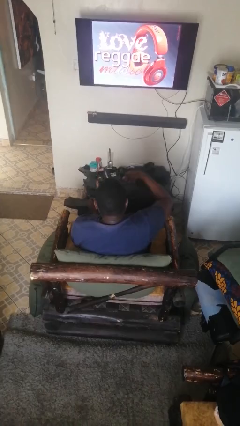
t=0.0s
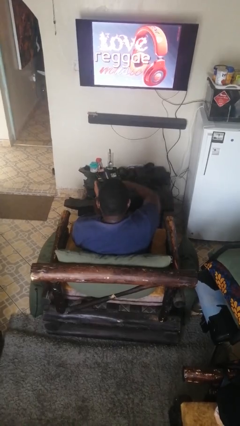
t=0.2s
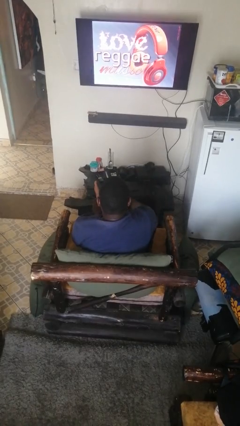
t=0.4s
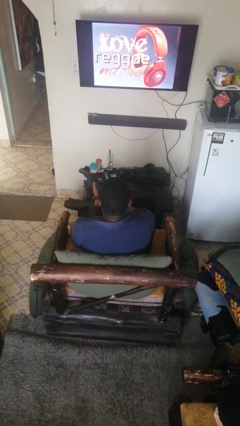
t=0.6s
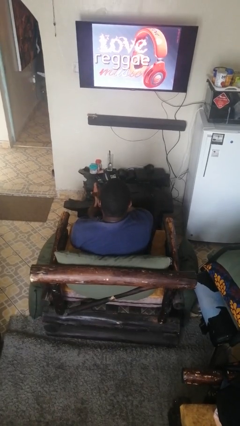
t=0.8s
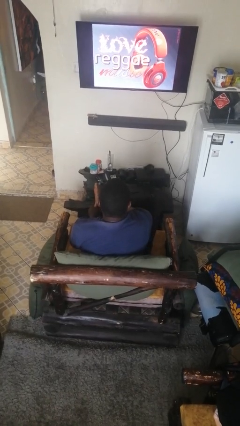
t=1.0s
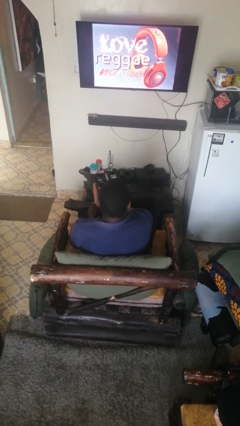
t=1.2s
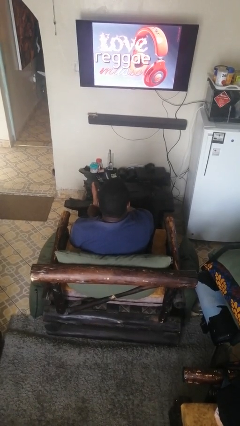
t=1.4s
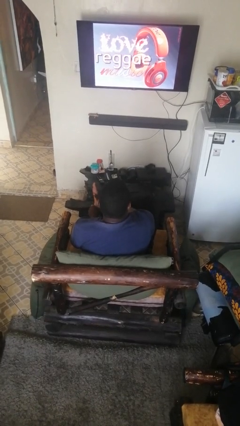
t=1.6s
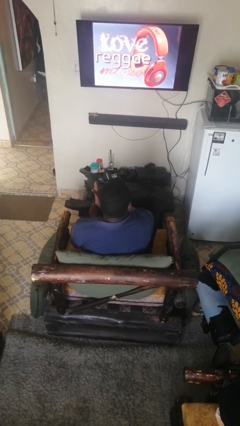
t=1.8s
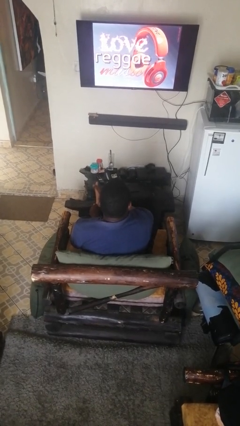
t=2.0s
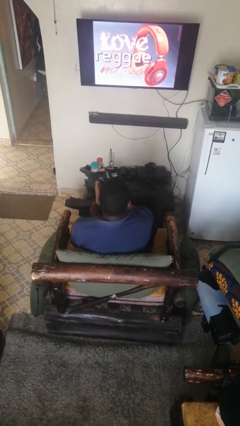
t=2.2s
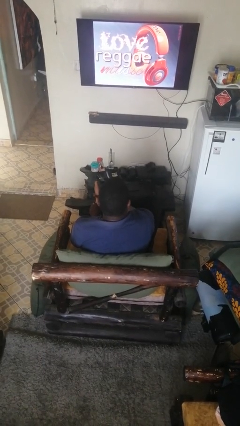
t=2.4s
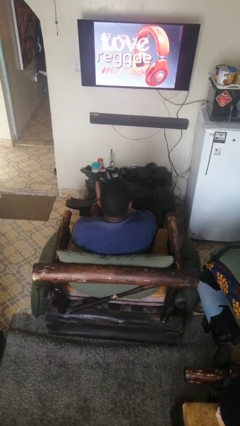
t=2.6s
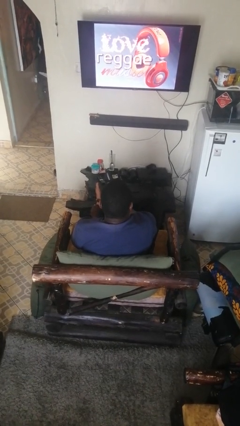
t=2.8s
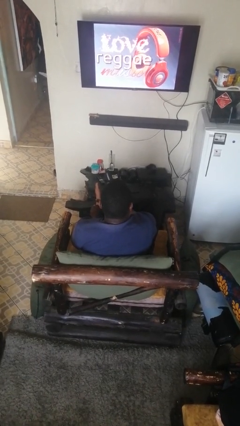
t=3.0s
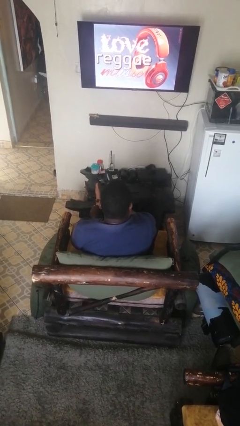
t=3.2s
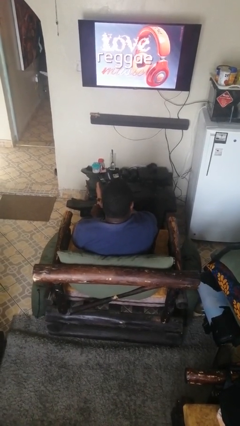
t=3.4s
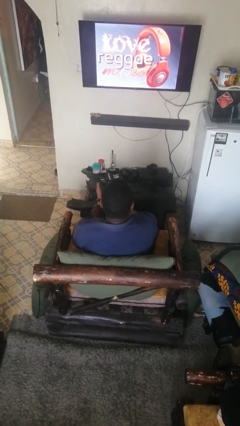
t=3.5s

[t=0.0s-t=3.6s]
person rubs foot

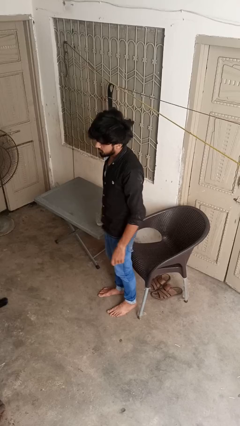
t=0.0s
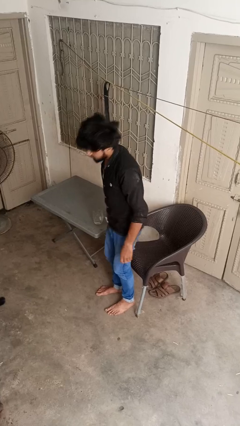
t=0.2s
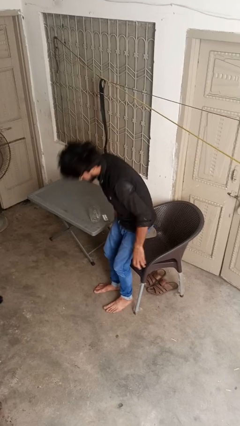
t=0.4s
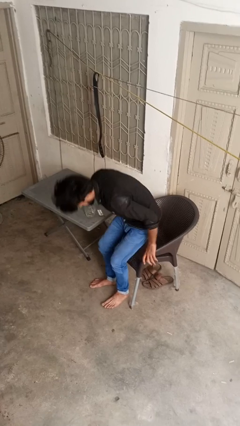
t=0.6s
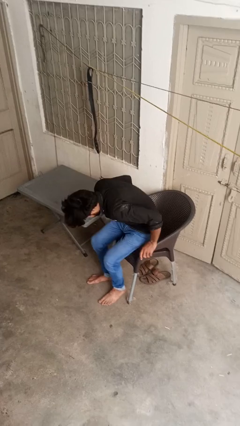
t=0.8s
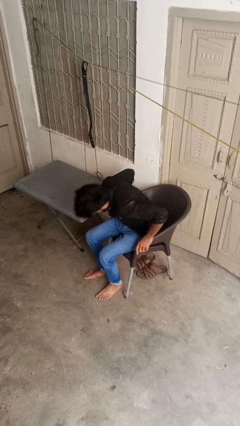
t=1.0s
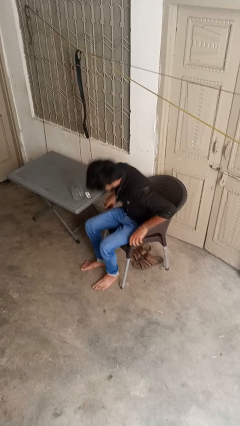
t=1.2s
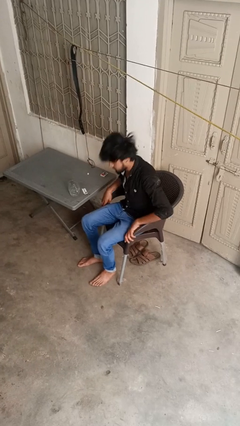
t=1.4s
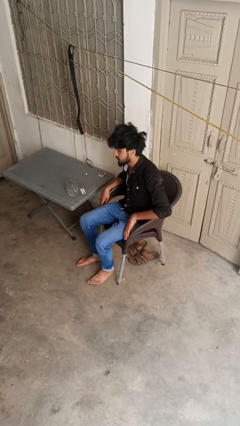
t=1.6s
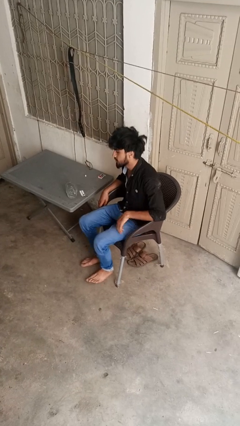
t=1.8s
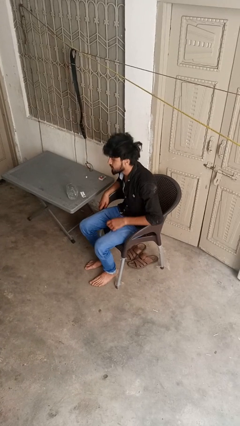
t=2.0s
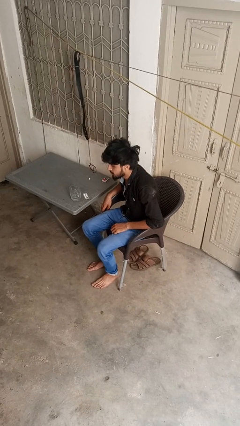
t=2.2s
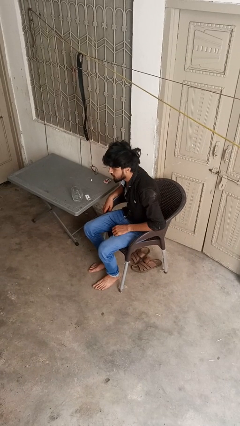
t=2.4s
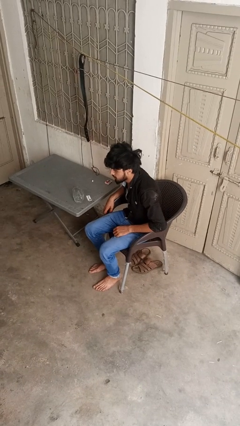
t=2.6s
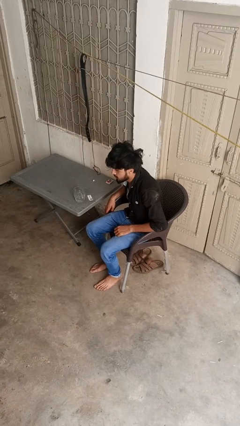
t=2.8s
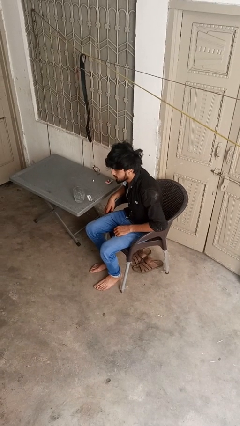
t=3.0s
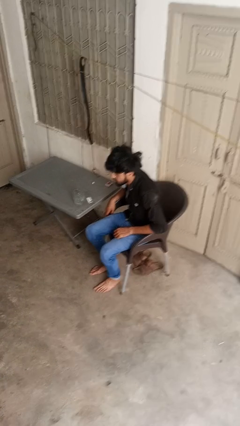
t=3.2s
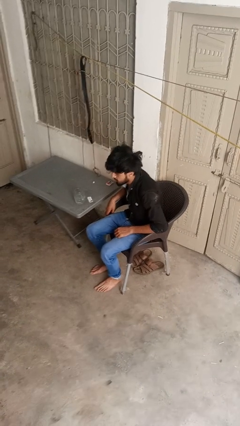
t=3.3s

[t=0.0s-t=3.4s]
person sits down

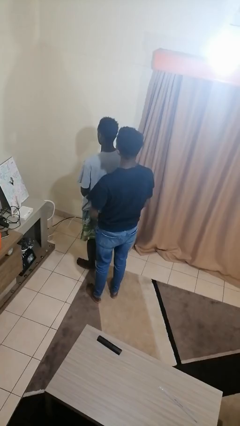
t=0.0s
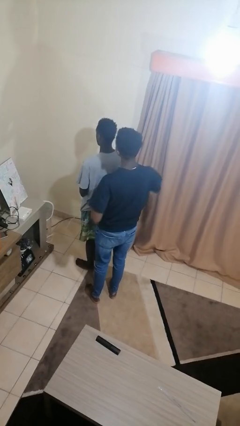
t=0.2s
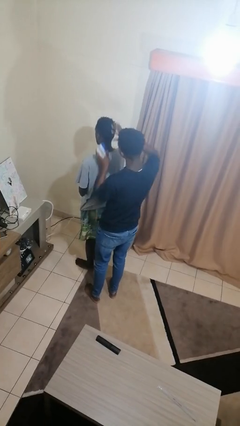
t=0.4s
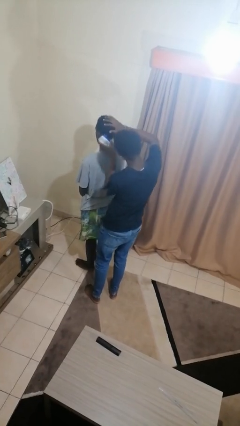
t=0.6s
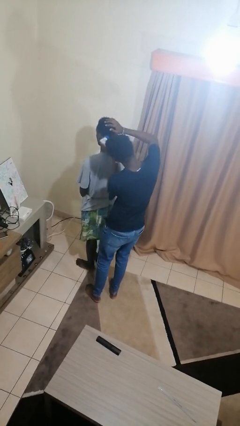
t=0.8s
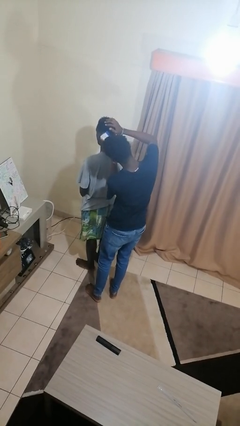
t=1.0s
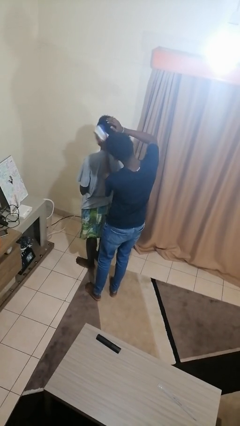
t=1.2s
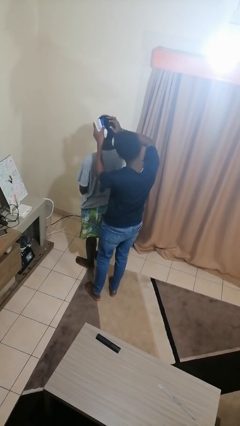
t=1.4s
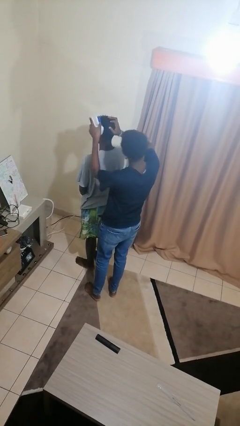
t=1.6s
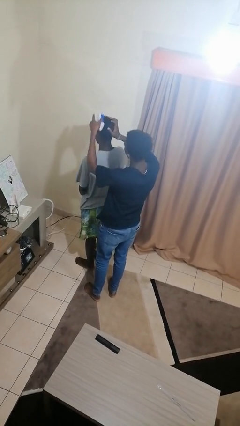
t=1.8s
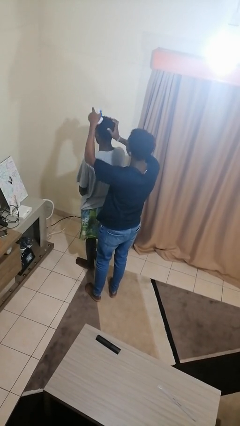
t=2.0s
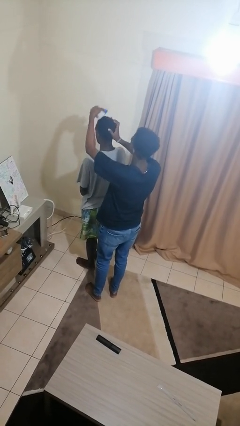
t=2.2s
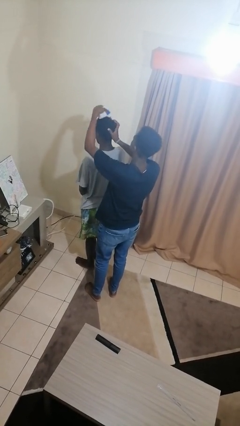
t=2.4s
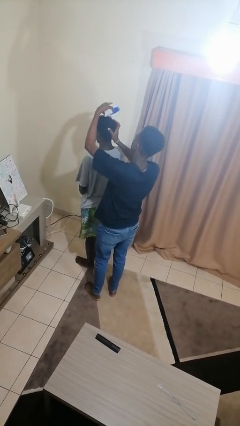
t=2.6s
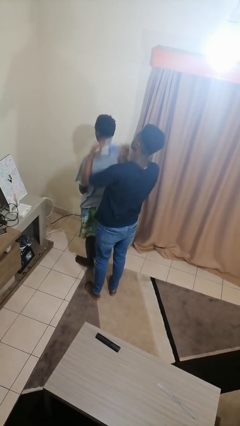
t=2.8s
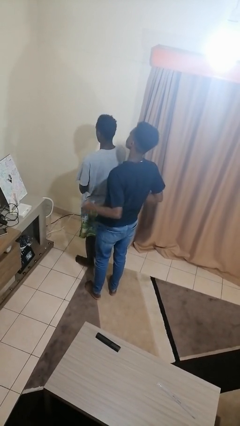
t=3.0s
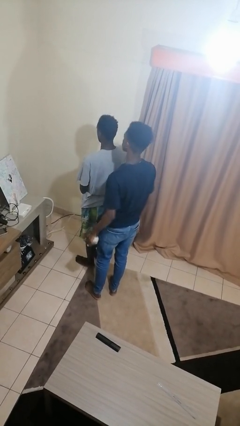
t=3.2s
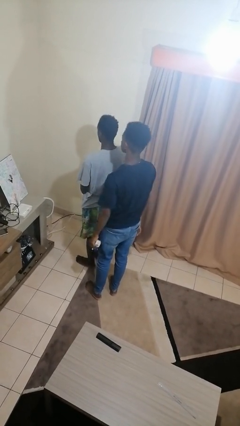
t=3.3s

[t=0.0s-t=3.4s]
person brushes hair of person

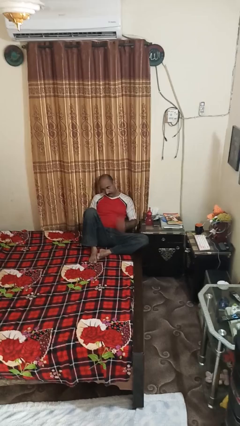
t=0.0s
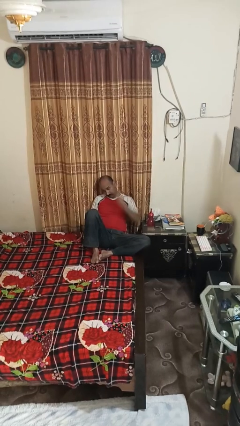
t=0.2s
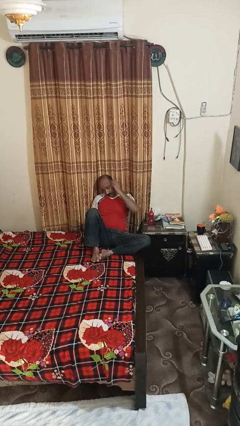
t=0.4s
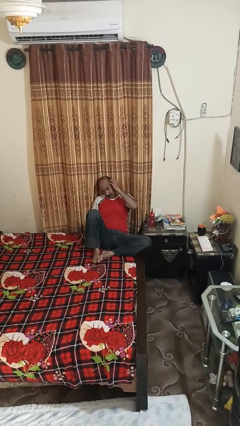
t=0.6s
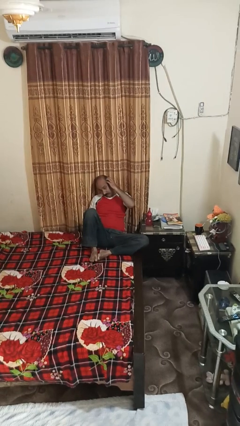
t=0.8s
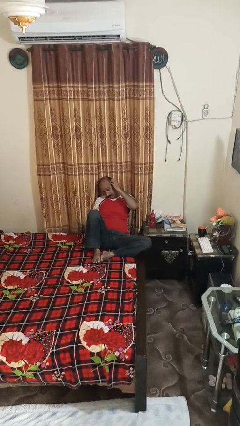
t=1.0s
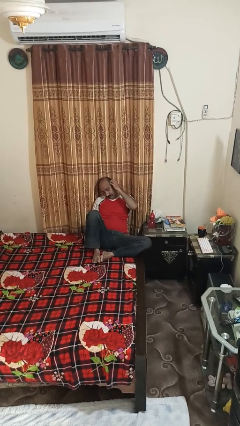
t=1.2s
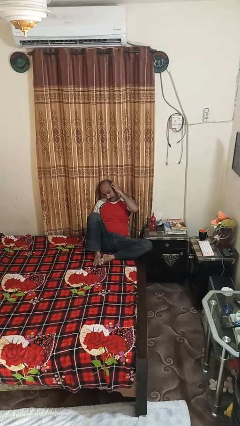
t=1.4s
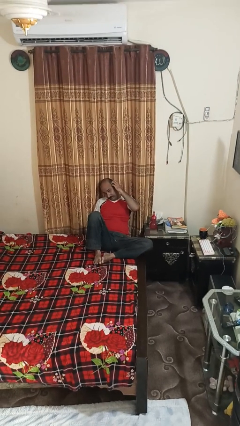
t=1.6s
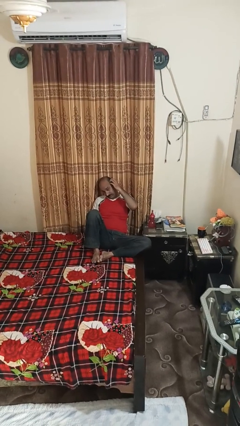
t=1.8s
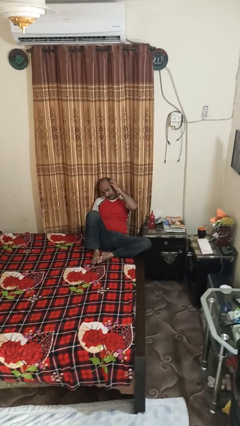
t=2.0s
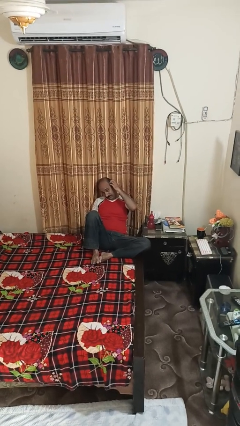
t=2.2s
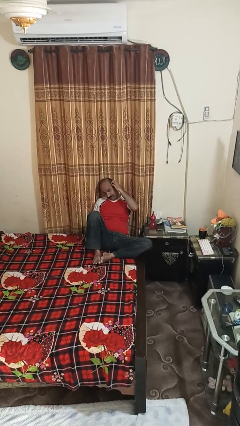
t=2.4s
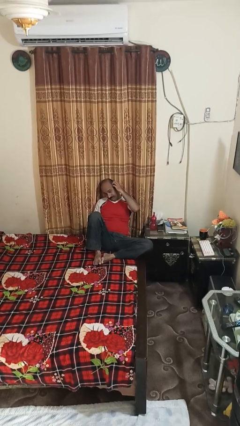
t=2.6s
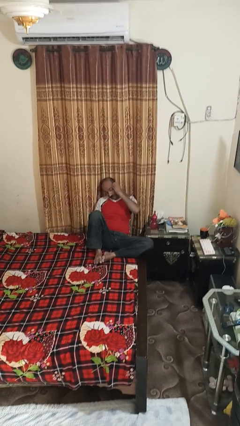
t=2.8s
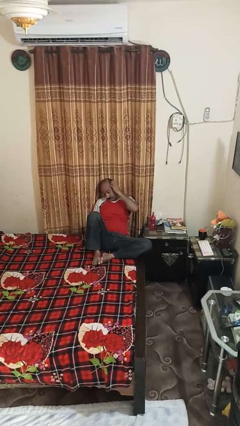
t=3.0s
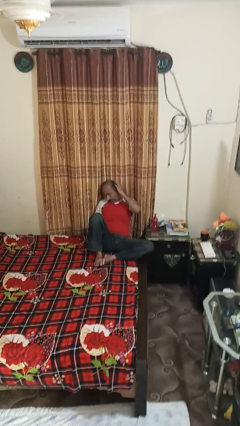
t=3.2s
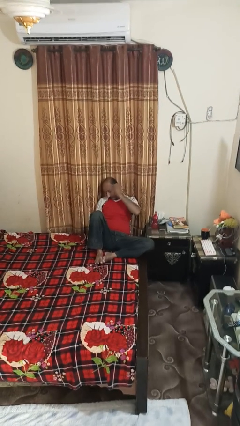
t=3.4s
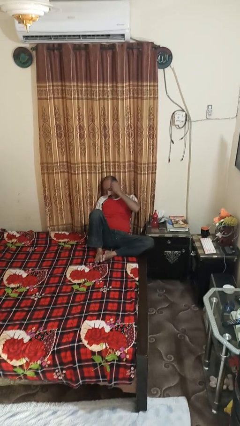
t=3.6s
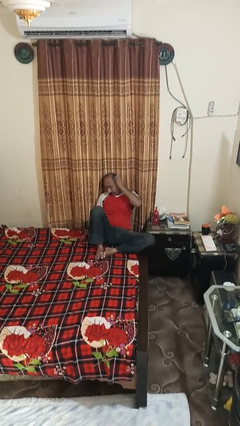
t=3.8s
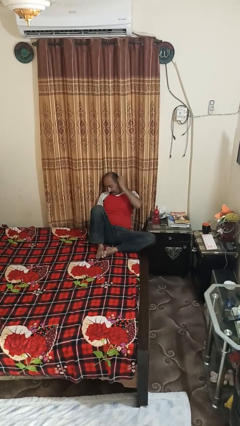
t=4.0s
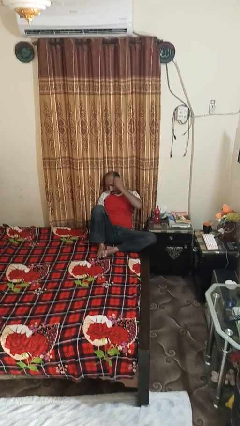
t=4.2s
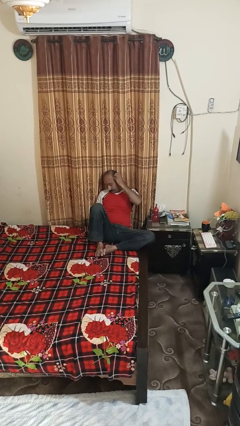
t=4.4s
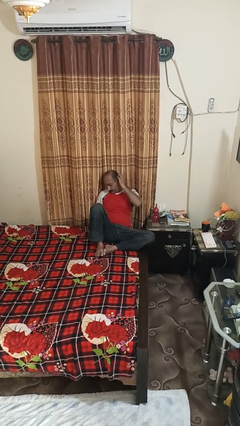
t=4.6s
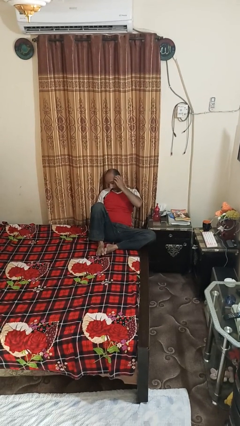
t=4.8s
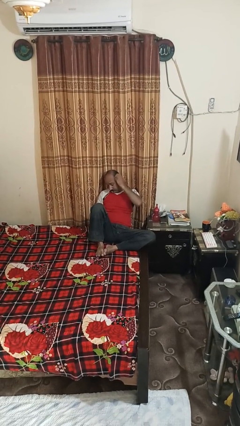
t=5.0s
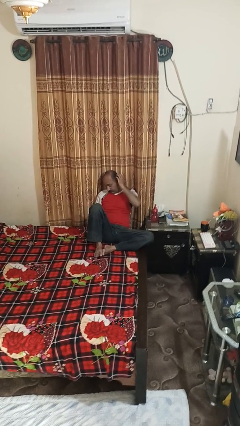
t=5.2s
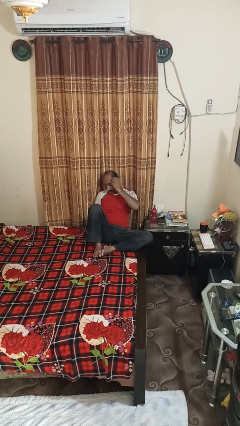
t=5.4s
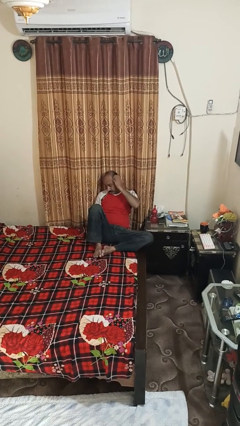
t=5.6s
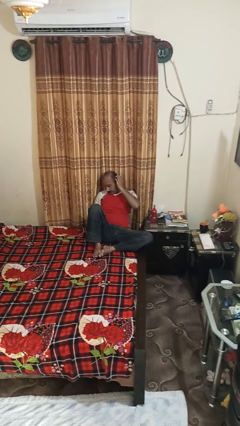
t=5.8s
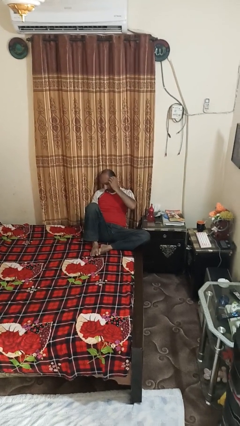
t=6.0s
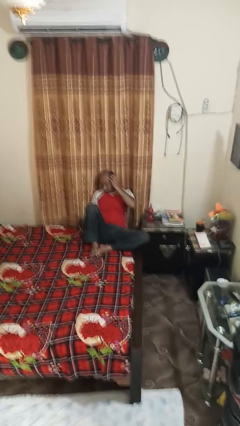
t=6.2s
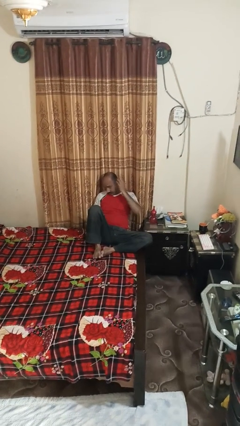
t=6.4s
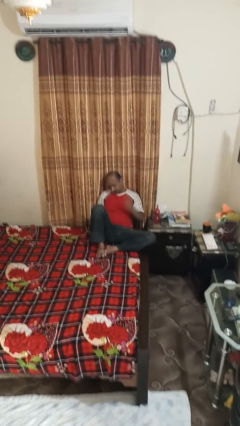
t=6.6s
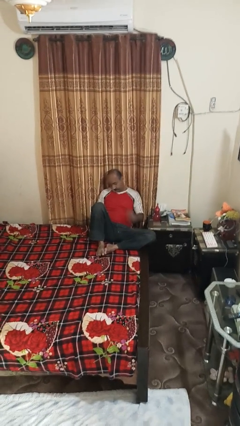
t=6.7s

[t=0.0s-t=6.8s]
person strokes hair

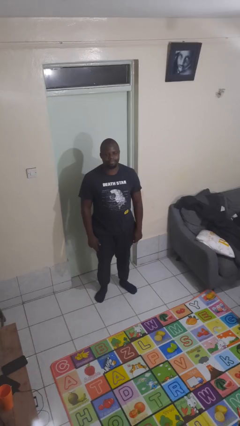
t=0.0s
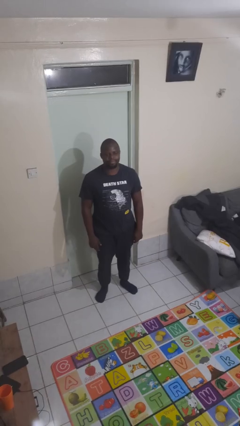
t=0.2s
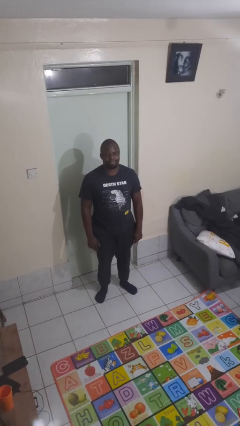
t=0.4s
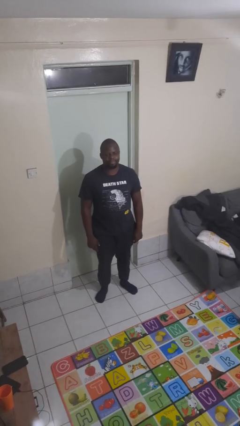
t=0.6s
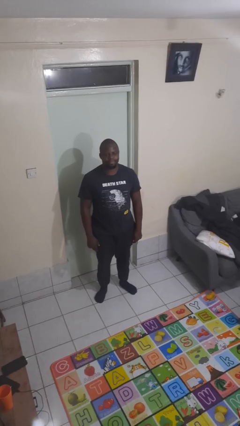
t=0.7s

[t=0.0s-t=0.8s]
person gestures lower hand
